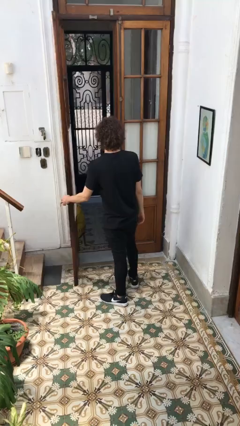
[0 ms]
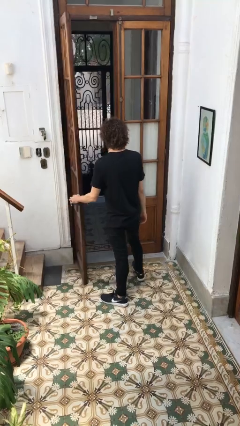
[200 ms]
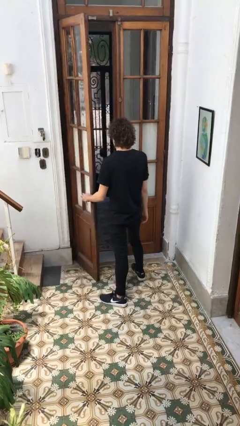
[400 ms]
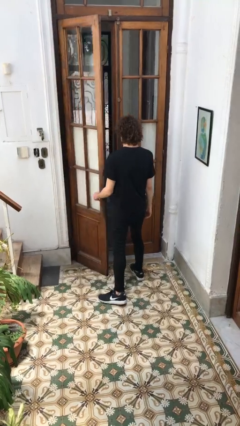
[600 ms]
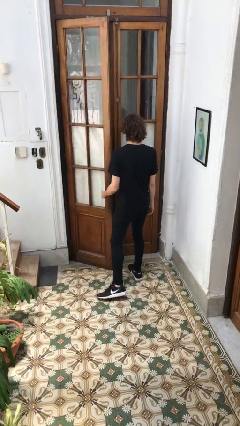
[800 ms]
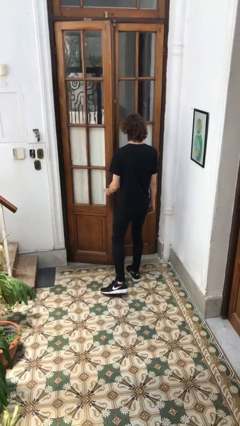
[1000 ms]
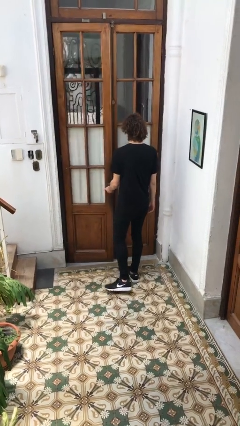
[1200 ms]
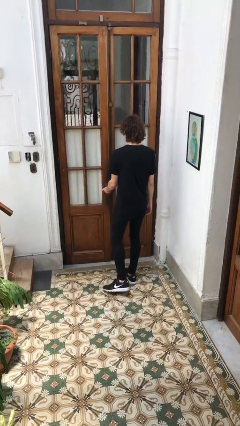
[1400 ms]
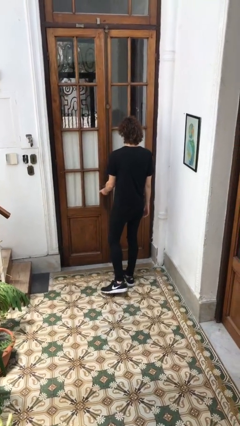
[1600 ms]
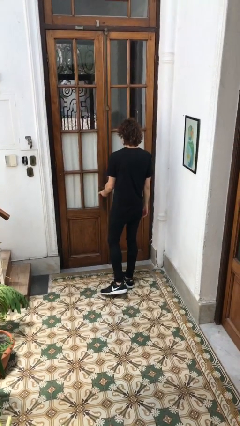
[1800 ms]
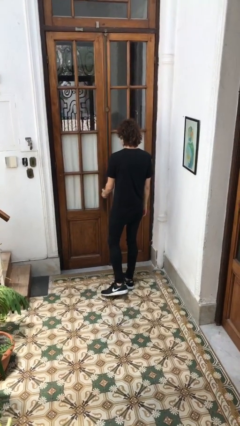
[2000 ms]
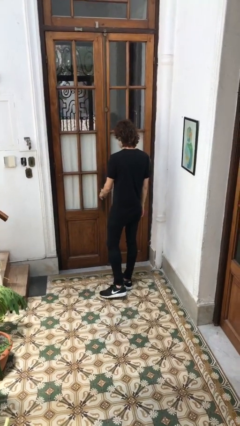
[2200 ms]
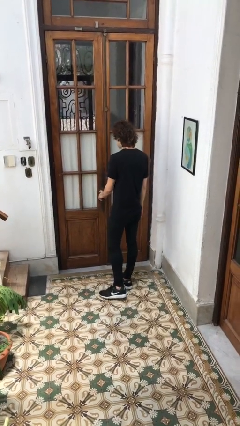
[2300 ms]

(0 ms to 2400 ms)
person closes facility door

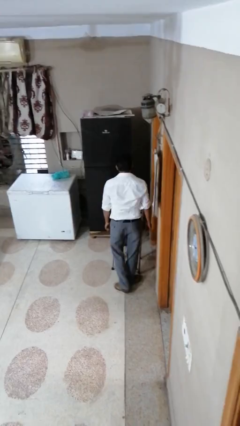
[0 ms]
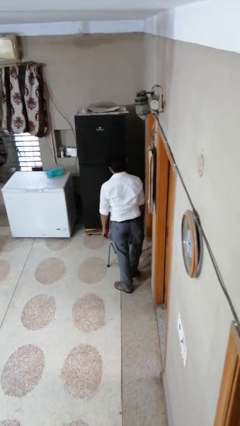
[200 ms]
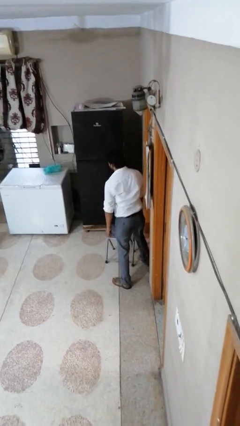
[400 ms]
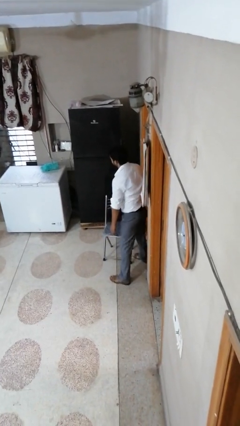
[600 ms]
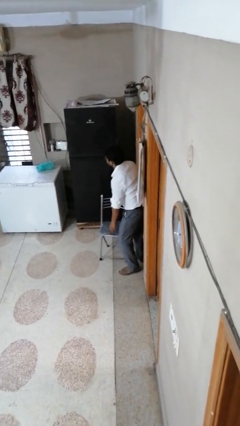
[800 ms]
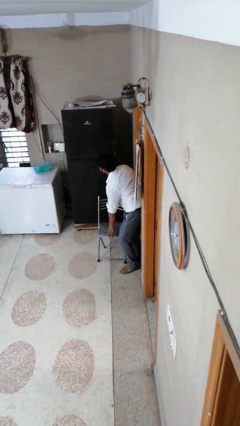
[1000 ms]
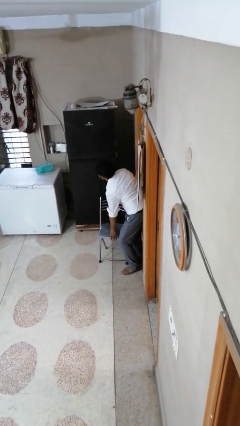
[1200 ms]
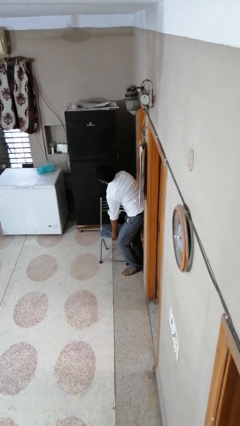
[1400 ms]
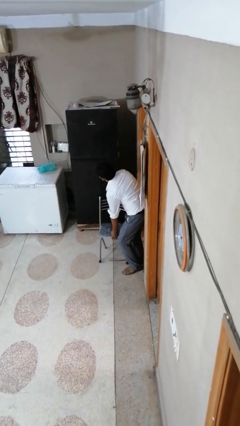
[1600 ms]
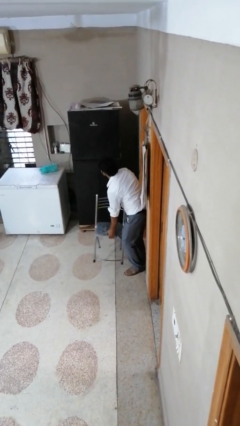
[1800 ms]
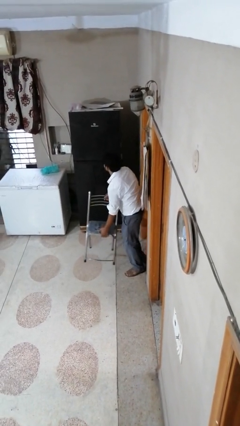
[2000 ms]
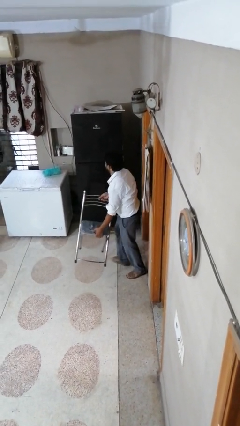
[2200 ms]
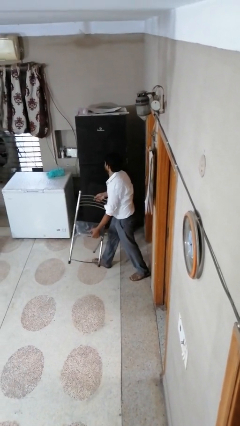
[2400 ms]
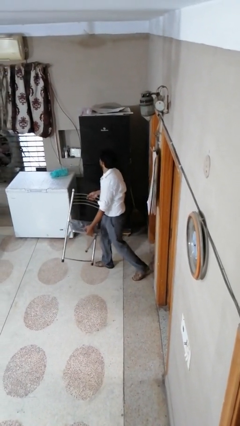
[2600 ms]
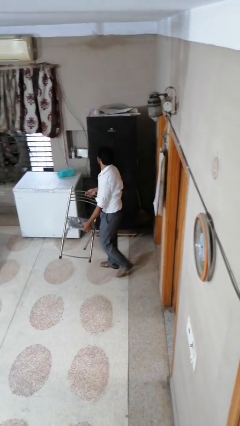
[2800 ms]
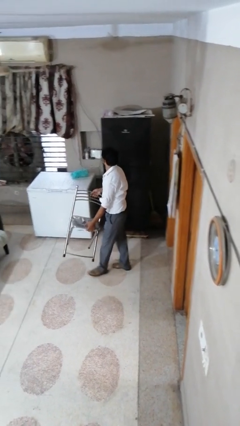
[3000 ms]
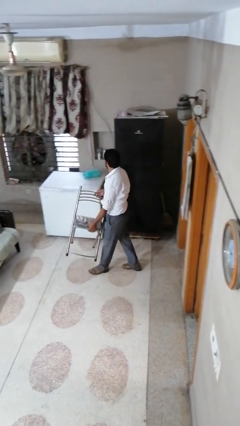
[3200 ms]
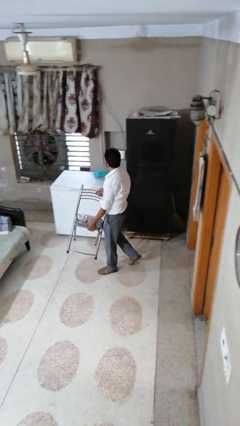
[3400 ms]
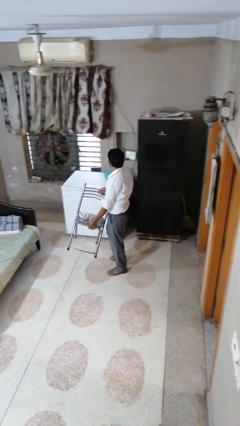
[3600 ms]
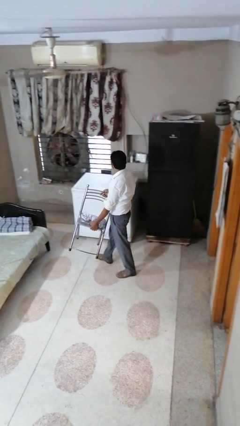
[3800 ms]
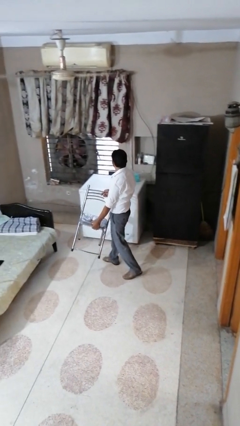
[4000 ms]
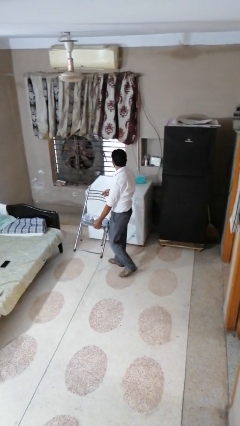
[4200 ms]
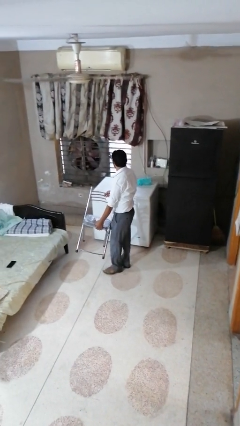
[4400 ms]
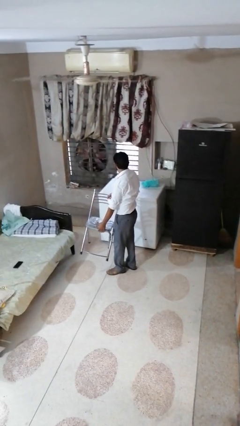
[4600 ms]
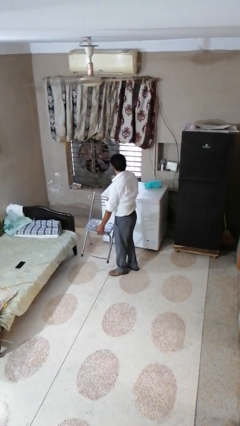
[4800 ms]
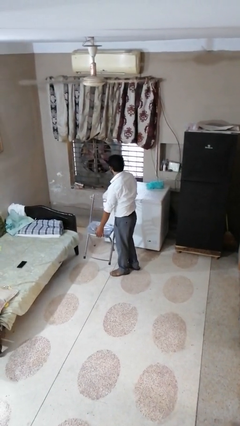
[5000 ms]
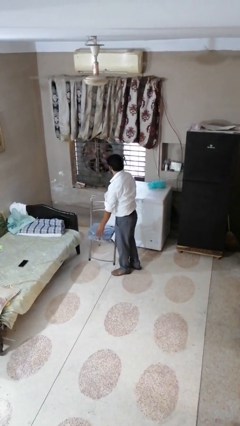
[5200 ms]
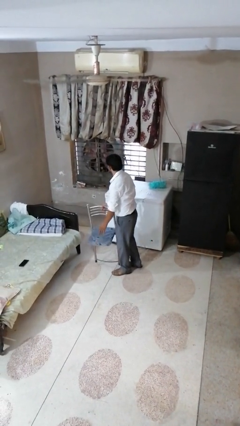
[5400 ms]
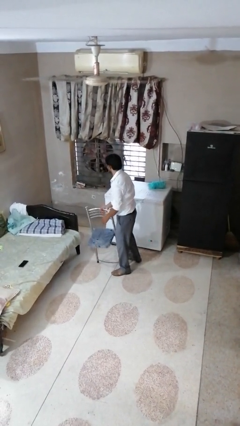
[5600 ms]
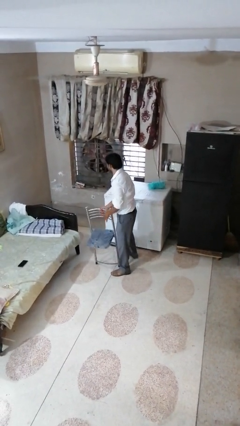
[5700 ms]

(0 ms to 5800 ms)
person carries furniture

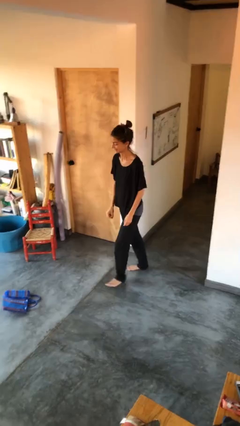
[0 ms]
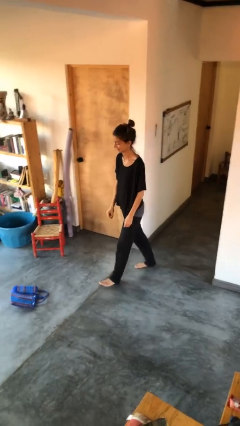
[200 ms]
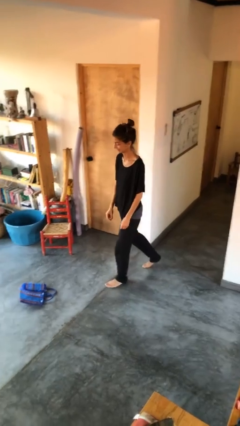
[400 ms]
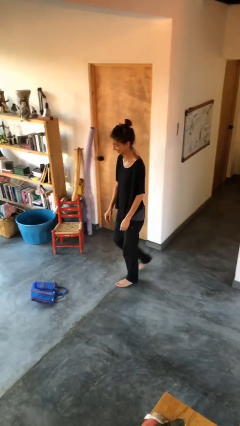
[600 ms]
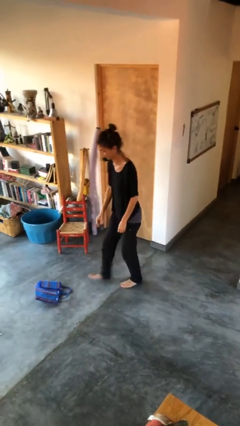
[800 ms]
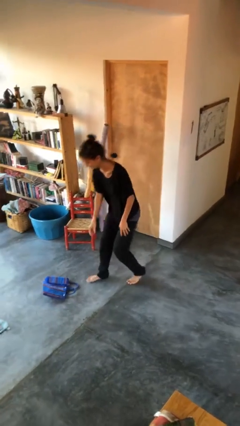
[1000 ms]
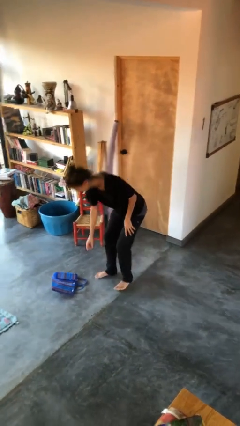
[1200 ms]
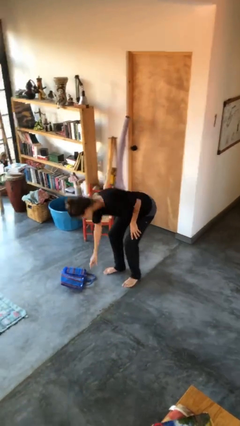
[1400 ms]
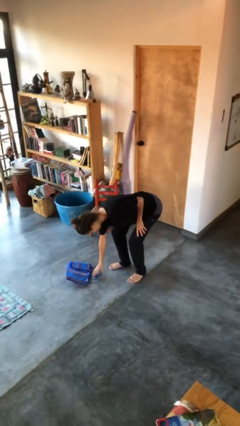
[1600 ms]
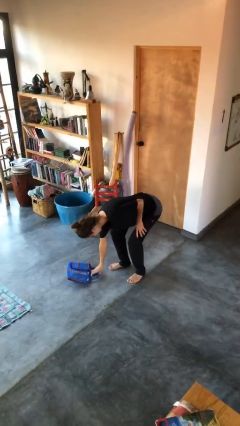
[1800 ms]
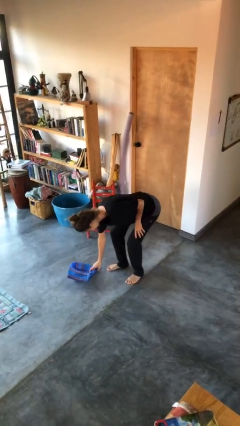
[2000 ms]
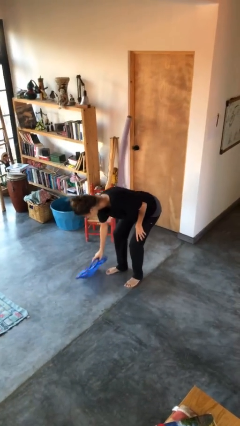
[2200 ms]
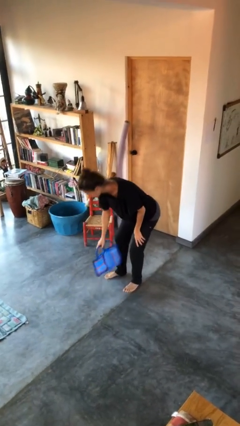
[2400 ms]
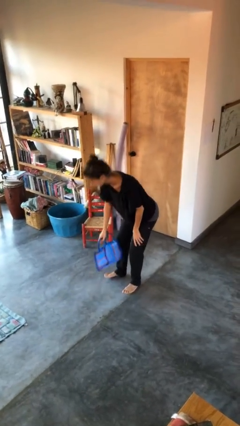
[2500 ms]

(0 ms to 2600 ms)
person picks up object from floor

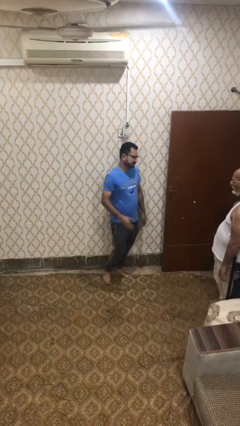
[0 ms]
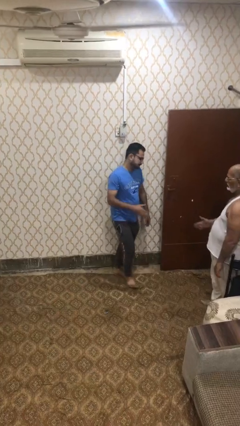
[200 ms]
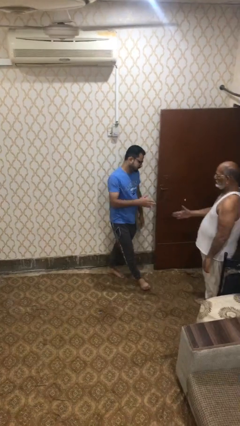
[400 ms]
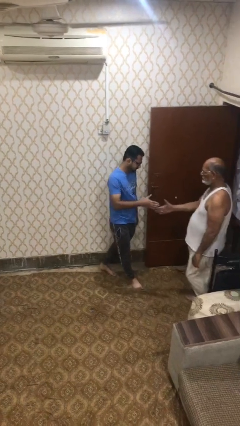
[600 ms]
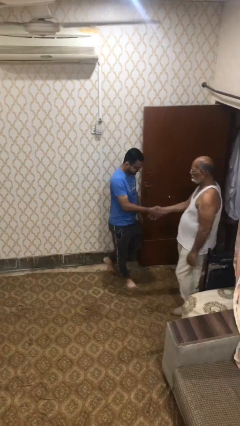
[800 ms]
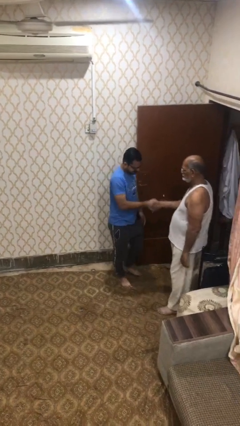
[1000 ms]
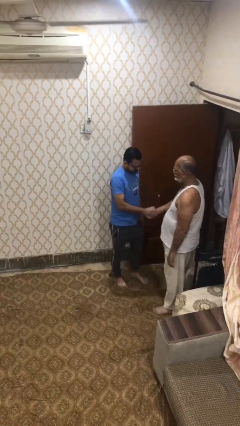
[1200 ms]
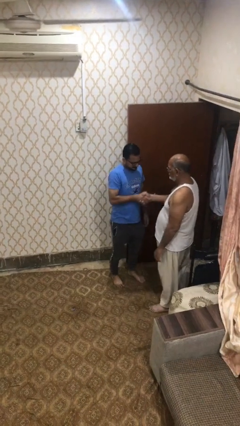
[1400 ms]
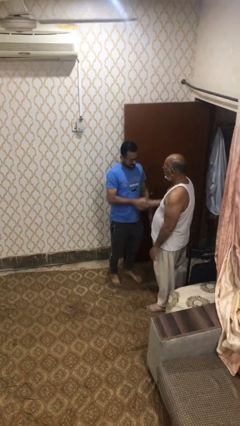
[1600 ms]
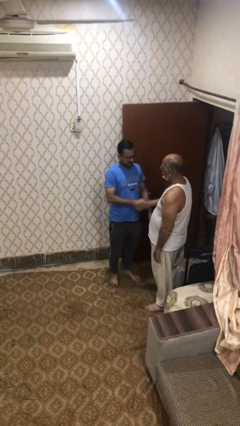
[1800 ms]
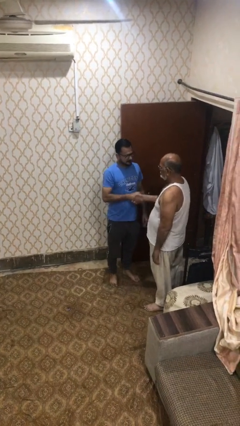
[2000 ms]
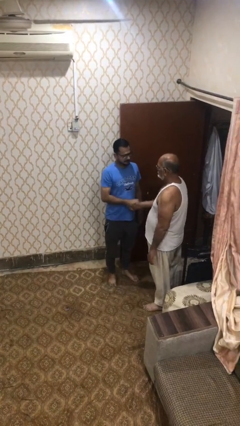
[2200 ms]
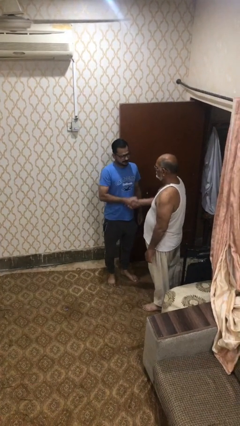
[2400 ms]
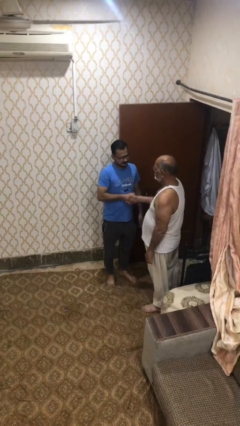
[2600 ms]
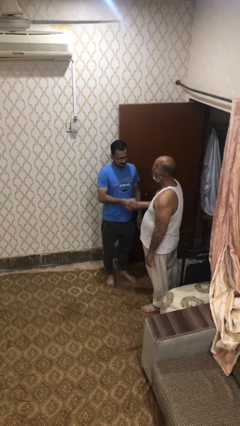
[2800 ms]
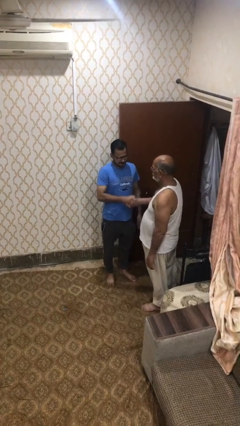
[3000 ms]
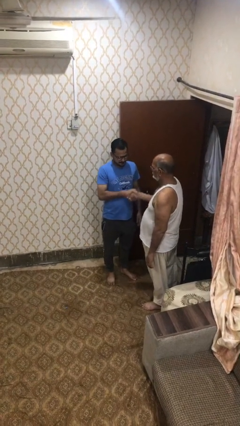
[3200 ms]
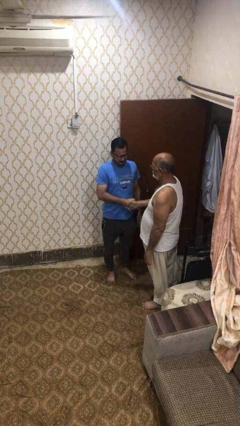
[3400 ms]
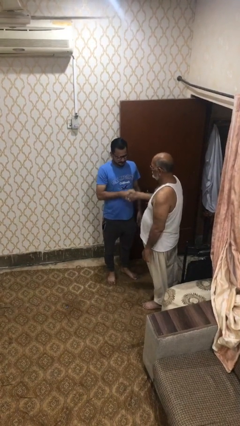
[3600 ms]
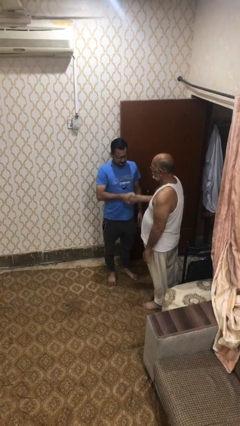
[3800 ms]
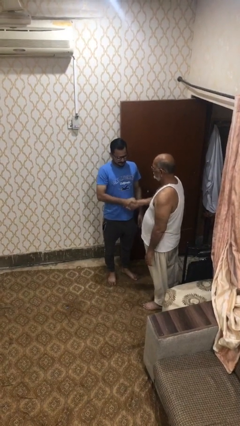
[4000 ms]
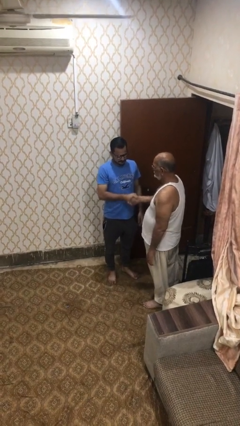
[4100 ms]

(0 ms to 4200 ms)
person shakes hand

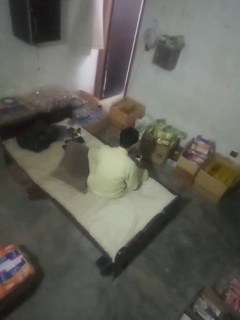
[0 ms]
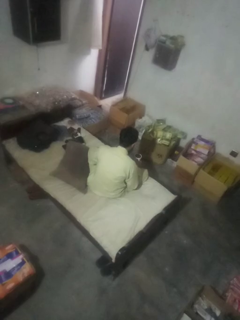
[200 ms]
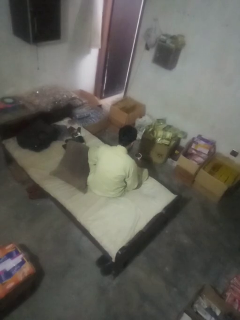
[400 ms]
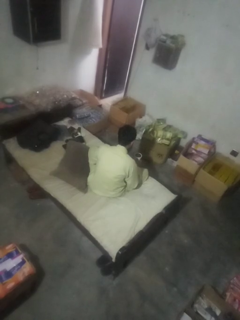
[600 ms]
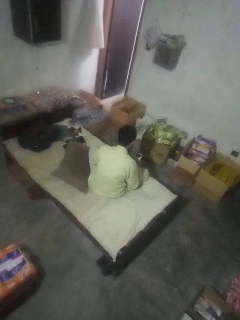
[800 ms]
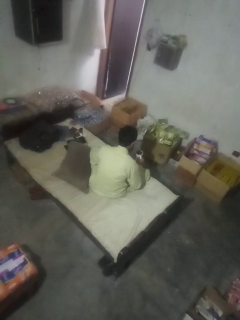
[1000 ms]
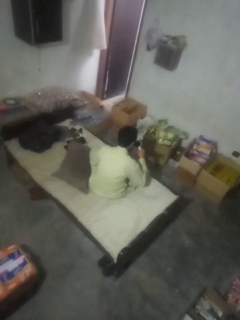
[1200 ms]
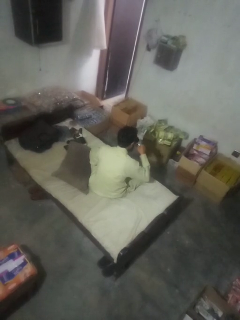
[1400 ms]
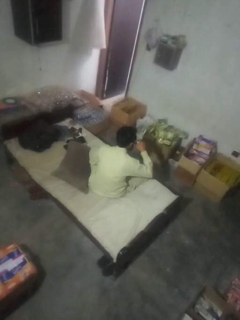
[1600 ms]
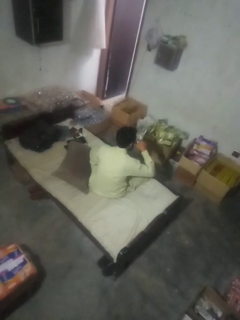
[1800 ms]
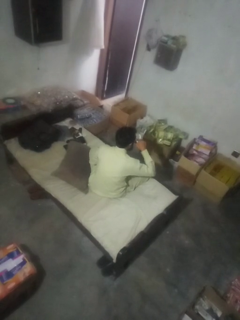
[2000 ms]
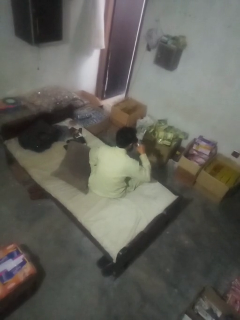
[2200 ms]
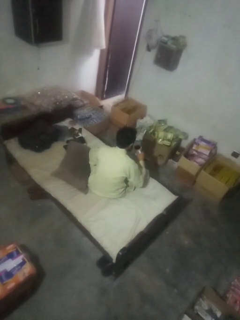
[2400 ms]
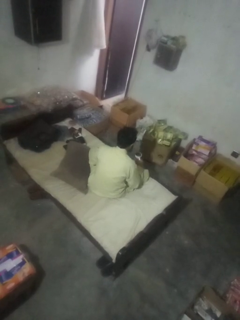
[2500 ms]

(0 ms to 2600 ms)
person drinks from mug

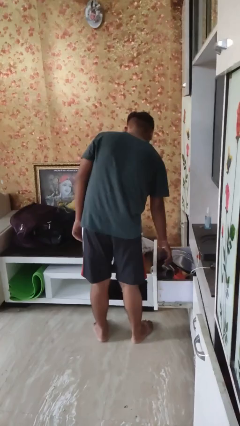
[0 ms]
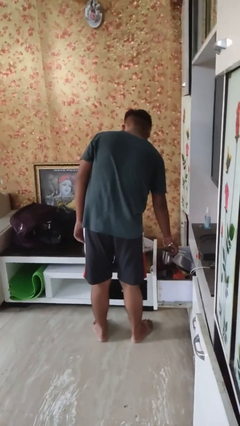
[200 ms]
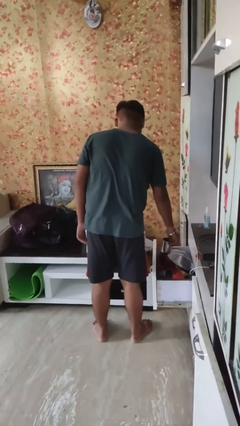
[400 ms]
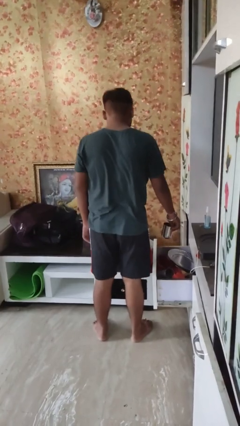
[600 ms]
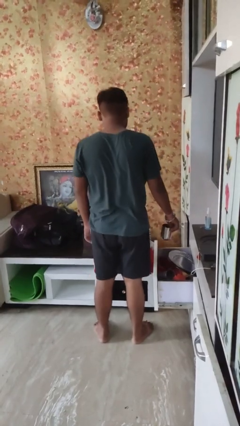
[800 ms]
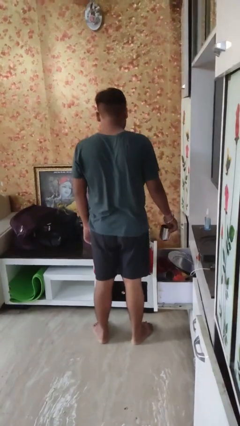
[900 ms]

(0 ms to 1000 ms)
person takes object from kitchen drawer
